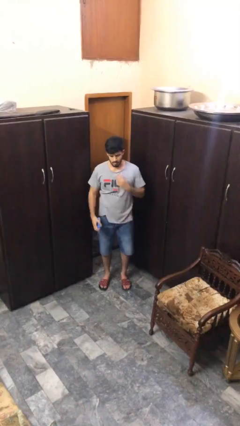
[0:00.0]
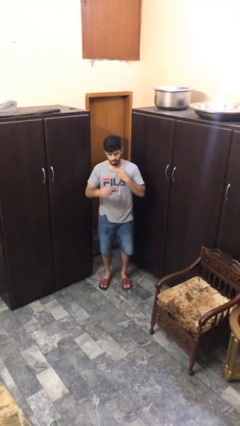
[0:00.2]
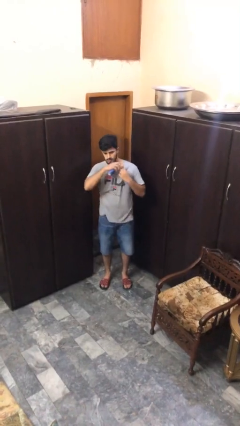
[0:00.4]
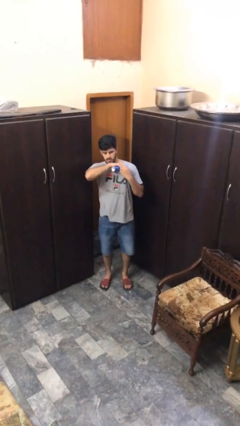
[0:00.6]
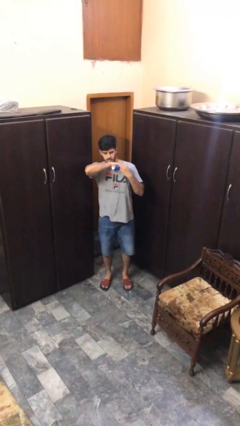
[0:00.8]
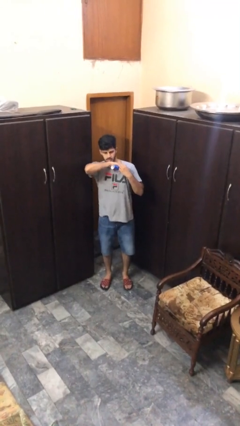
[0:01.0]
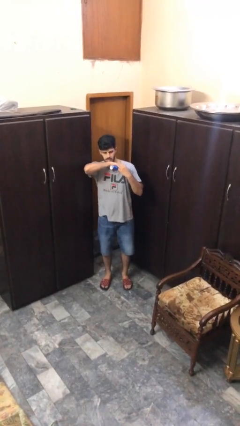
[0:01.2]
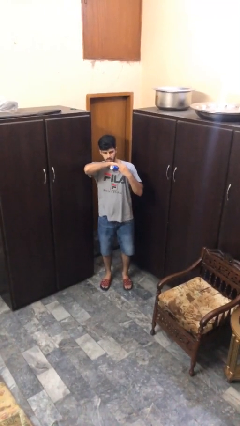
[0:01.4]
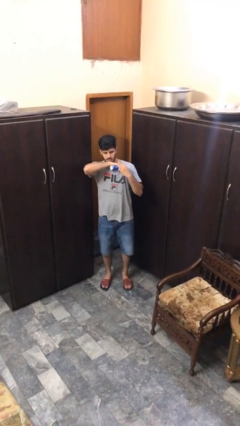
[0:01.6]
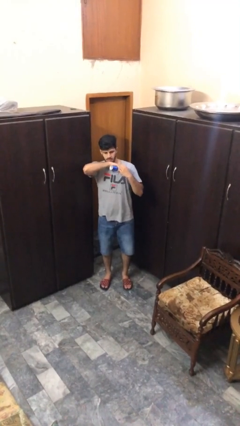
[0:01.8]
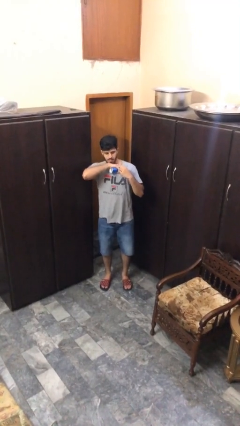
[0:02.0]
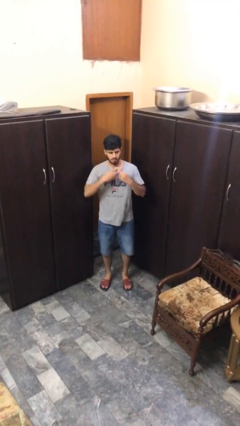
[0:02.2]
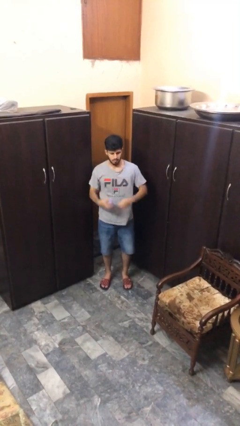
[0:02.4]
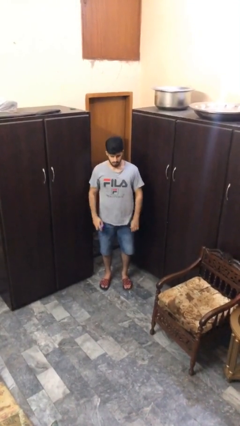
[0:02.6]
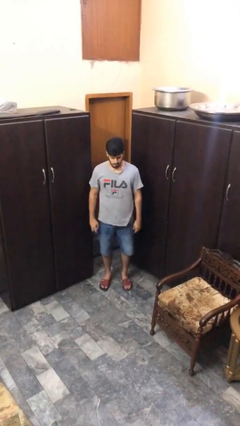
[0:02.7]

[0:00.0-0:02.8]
person applies deodorant

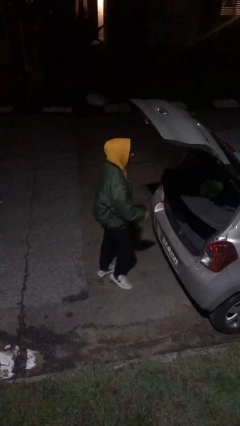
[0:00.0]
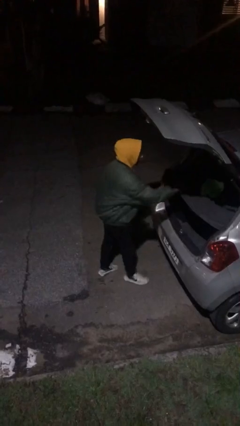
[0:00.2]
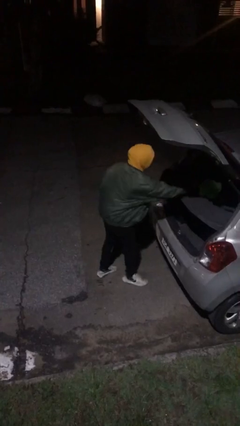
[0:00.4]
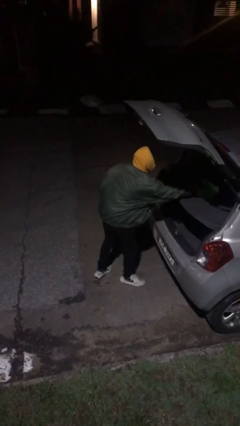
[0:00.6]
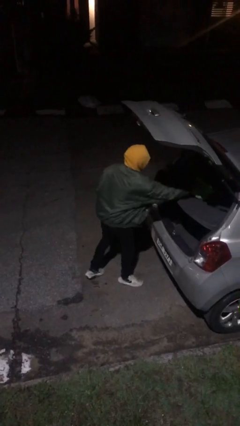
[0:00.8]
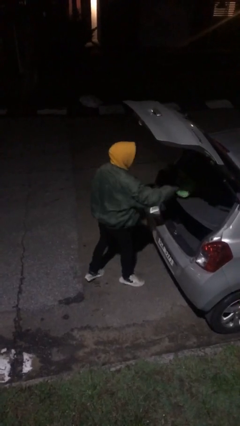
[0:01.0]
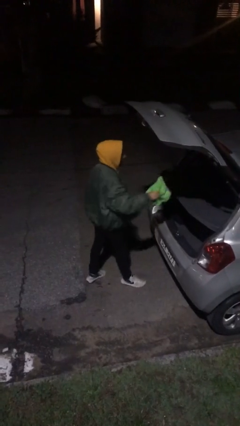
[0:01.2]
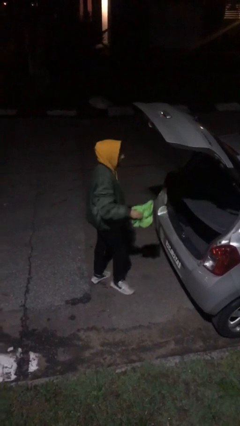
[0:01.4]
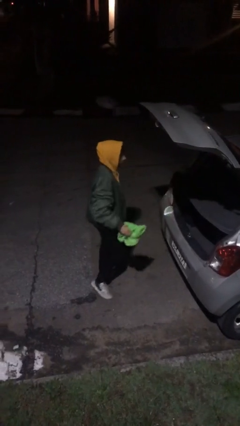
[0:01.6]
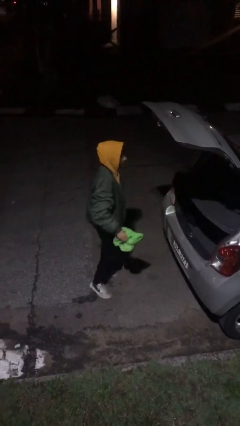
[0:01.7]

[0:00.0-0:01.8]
person unloads car

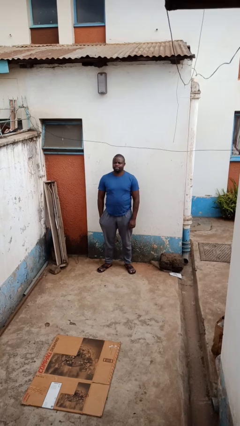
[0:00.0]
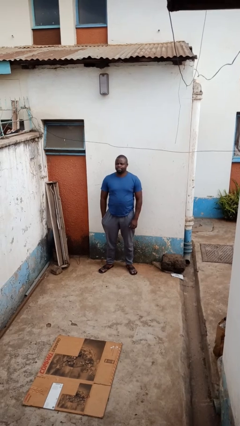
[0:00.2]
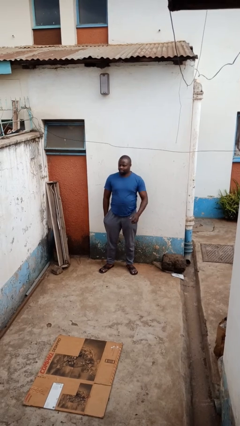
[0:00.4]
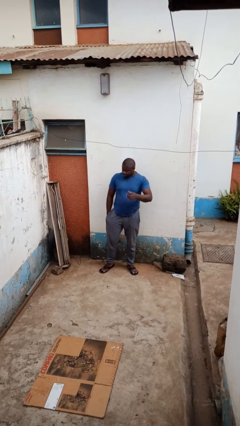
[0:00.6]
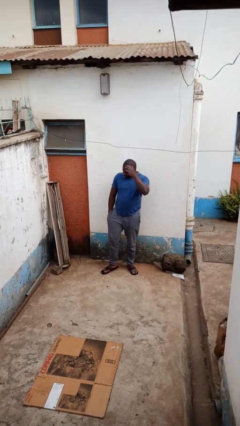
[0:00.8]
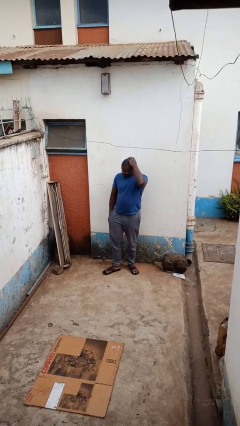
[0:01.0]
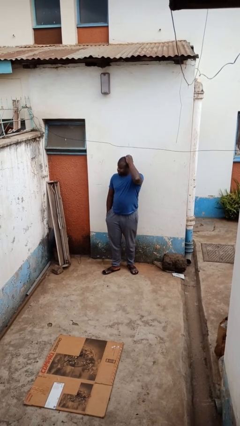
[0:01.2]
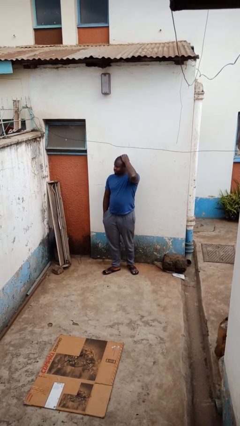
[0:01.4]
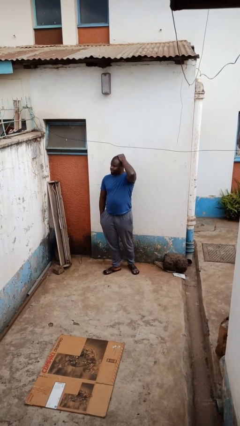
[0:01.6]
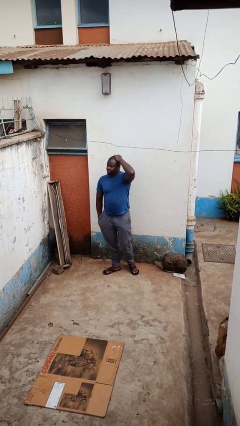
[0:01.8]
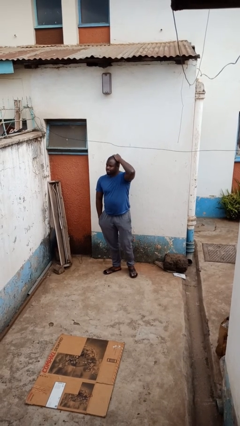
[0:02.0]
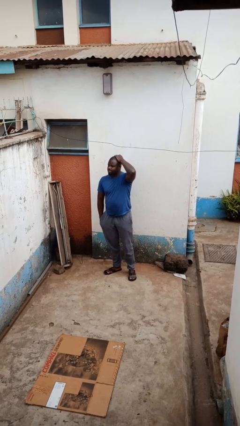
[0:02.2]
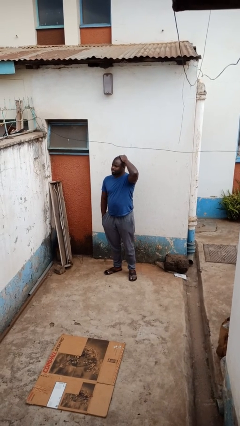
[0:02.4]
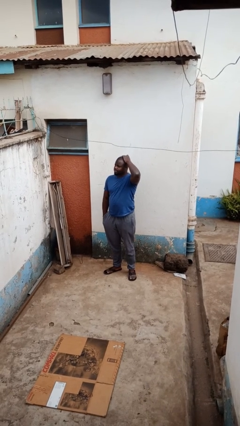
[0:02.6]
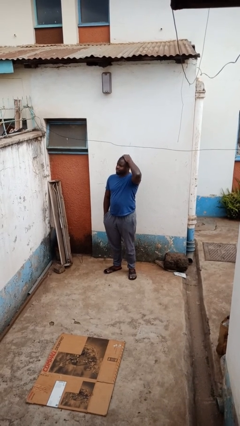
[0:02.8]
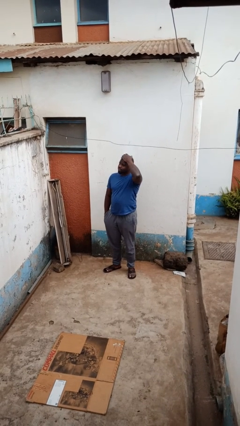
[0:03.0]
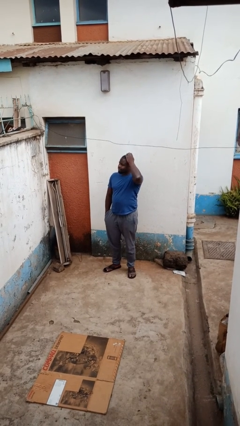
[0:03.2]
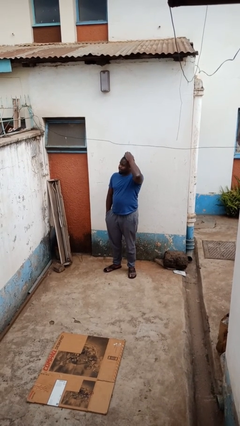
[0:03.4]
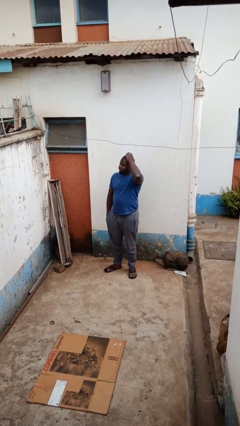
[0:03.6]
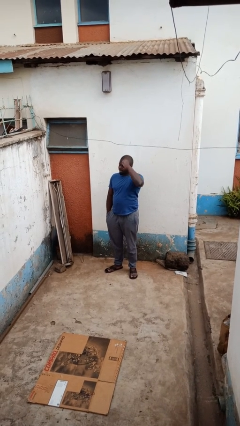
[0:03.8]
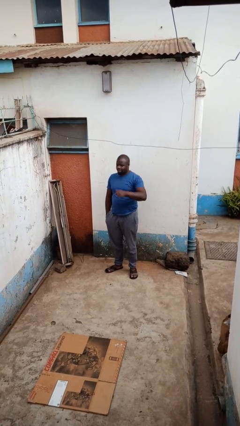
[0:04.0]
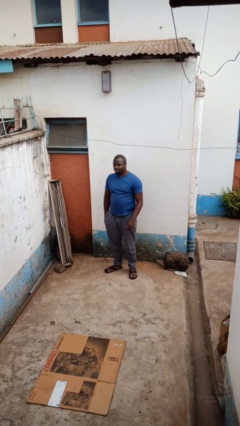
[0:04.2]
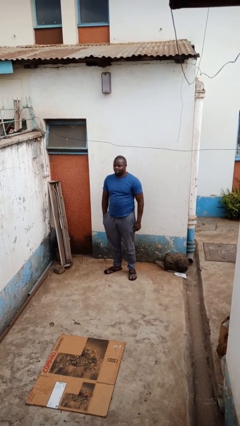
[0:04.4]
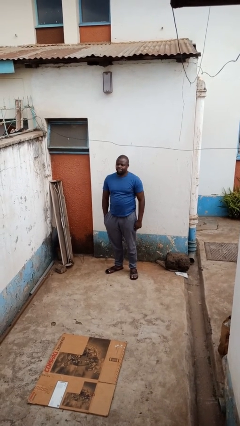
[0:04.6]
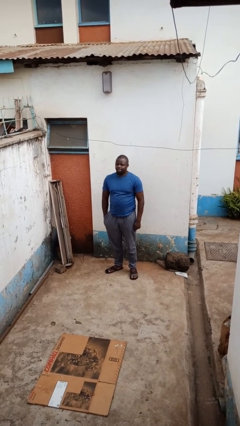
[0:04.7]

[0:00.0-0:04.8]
person scratches face

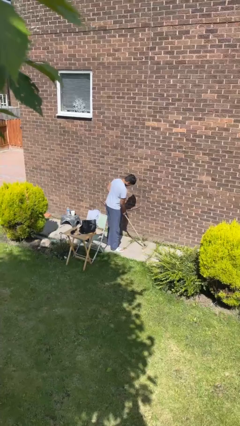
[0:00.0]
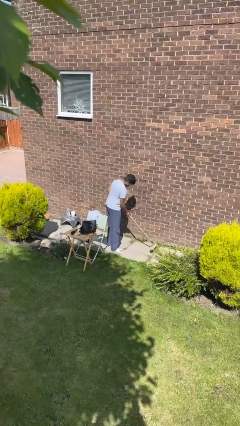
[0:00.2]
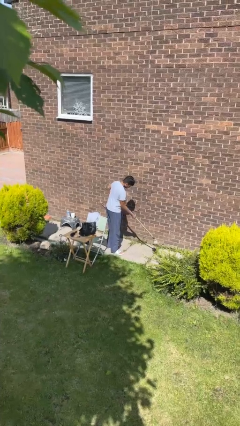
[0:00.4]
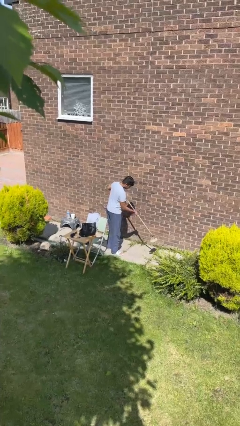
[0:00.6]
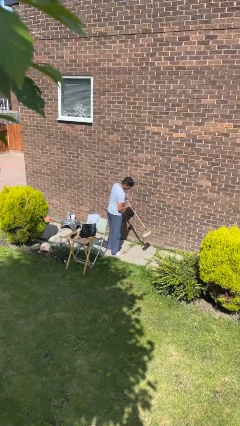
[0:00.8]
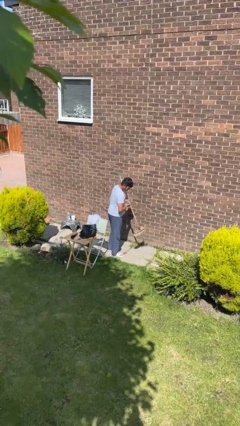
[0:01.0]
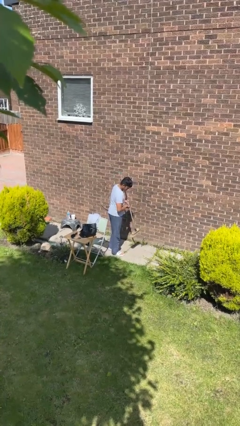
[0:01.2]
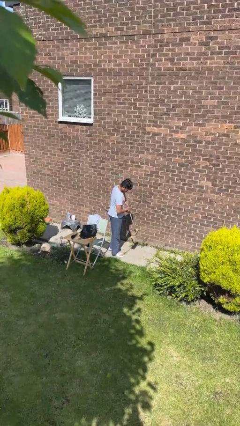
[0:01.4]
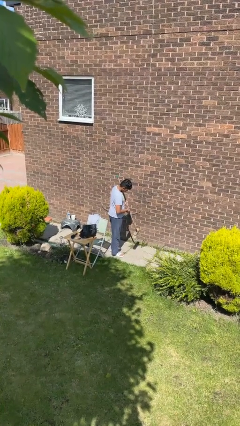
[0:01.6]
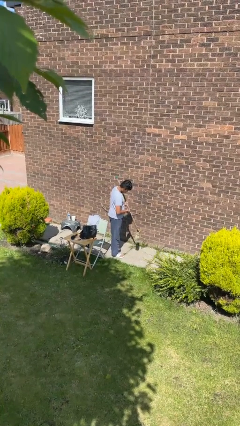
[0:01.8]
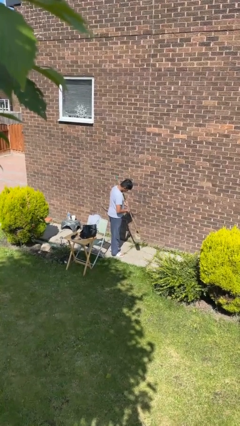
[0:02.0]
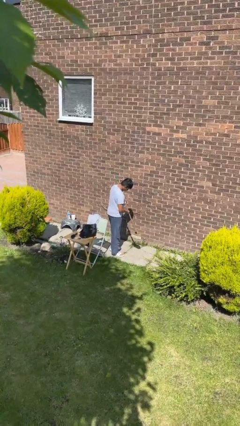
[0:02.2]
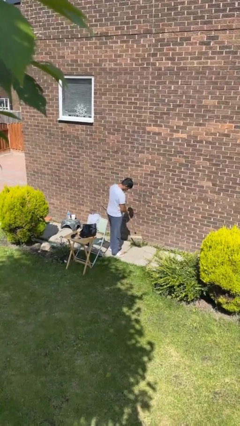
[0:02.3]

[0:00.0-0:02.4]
person sweeps floor

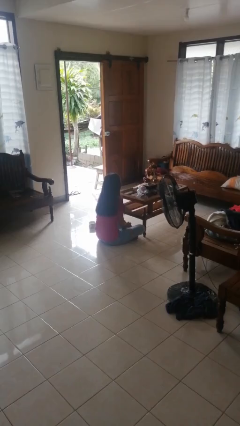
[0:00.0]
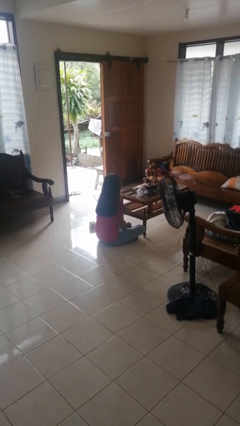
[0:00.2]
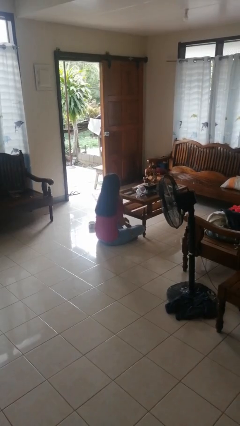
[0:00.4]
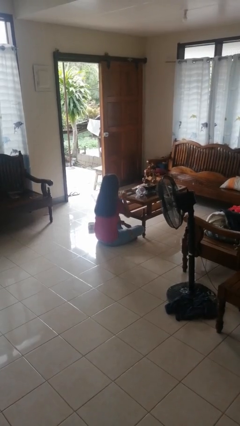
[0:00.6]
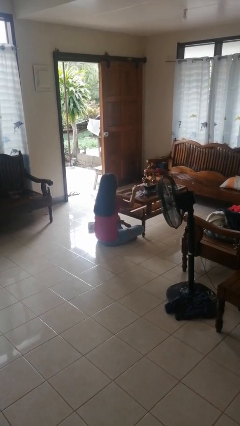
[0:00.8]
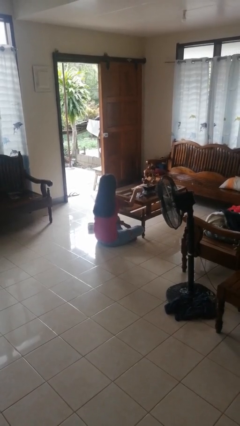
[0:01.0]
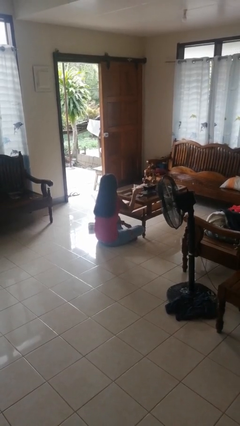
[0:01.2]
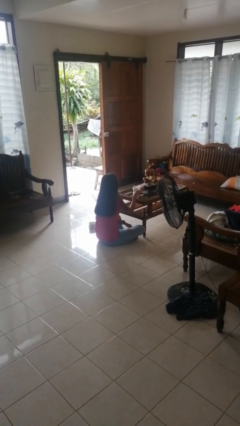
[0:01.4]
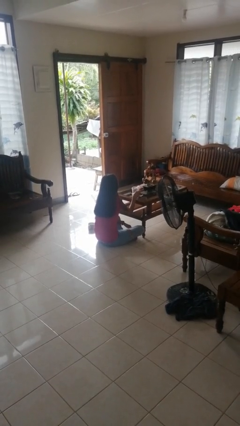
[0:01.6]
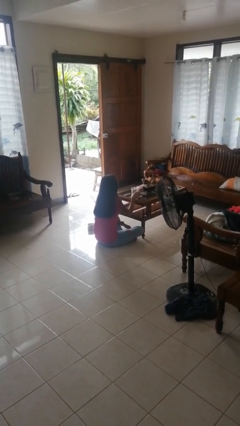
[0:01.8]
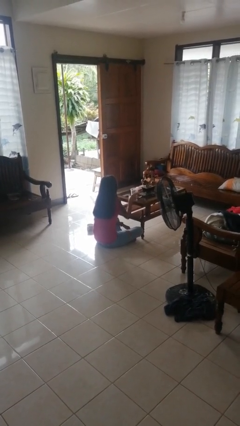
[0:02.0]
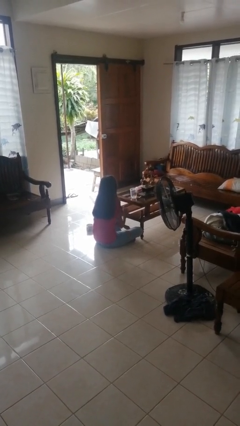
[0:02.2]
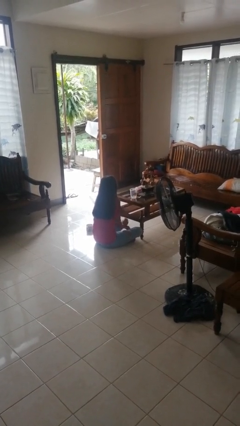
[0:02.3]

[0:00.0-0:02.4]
person sets upright glass

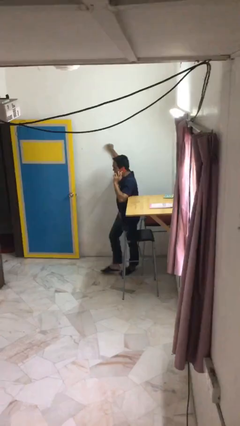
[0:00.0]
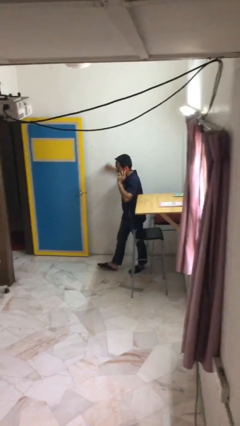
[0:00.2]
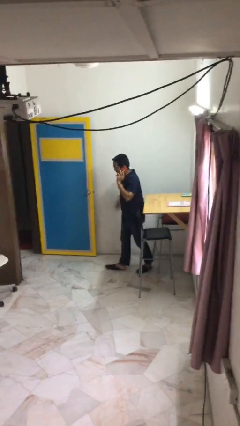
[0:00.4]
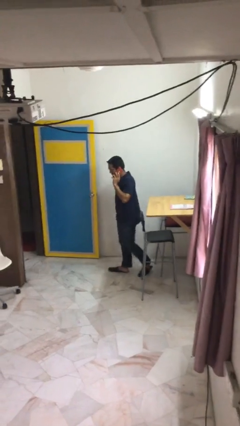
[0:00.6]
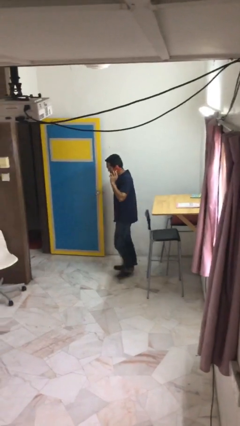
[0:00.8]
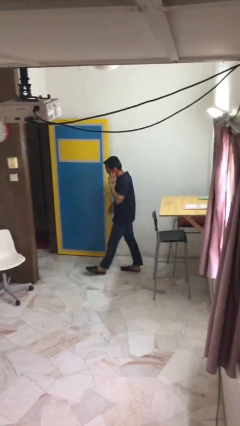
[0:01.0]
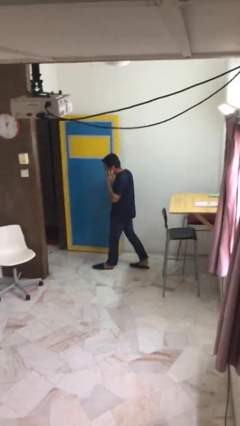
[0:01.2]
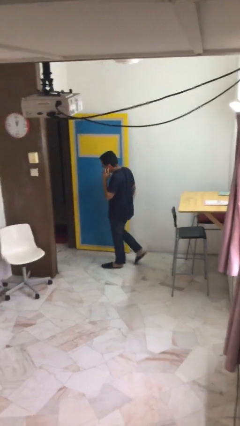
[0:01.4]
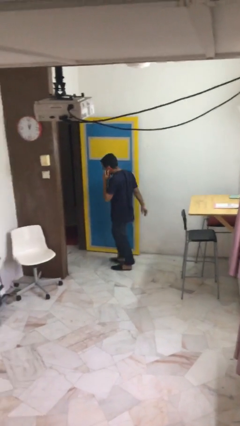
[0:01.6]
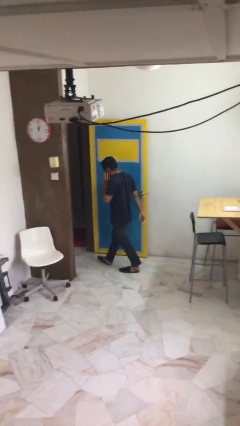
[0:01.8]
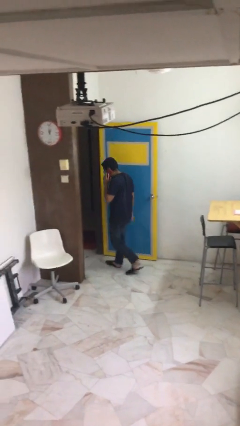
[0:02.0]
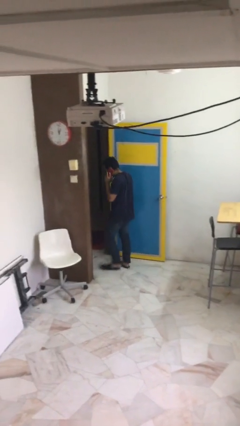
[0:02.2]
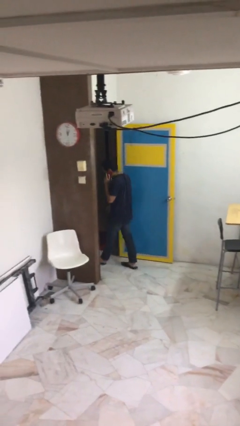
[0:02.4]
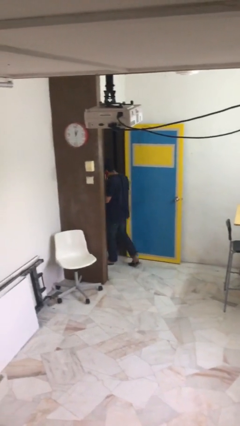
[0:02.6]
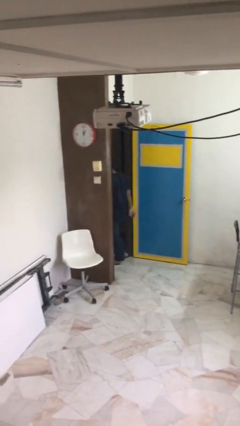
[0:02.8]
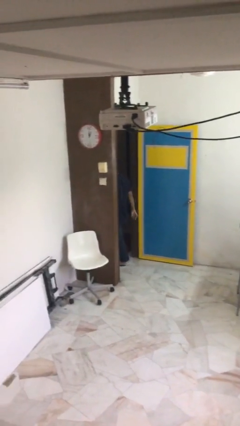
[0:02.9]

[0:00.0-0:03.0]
person exits scene through structure

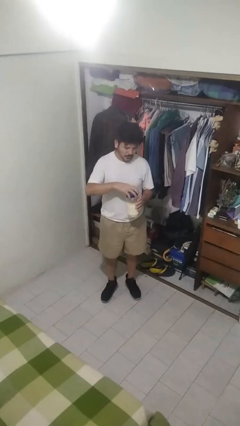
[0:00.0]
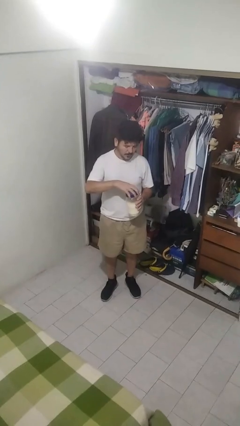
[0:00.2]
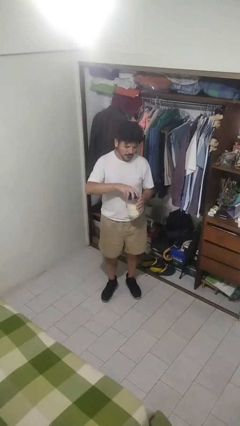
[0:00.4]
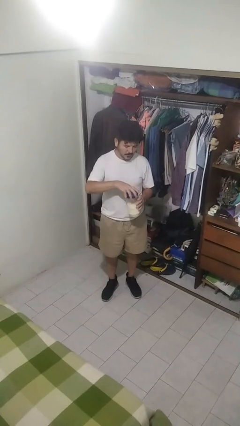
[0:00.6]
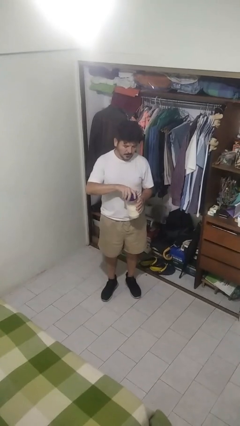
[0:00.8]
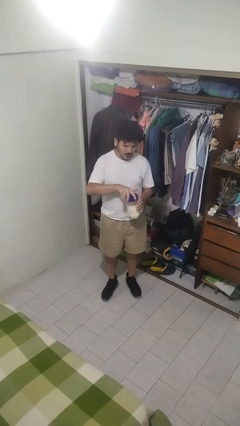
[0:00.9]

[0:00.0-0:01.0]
person closes jar
